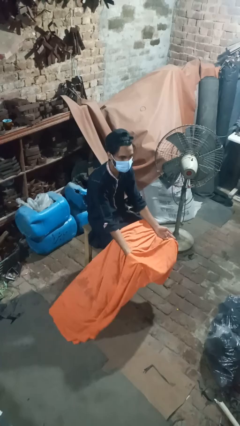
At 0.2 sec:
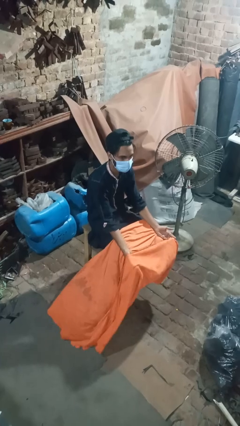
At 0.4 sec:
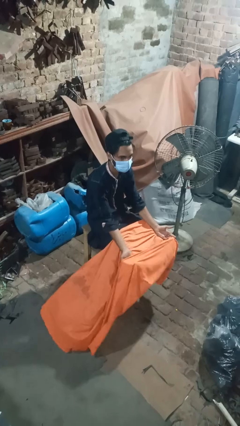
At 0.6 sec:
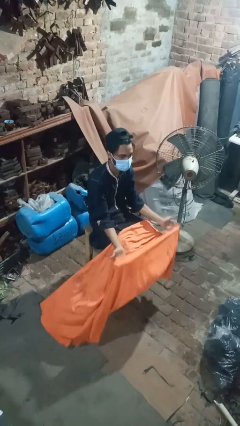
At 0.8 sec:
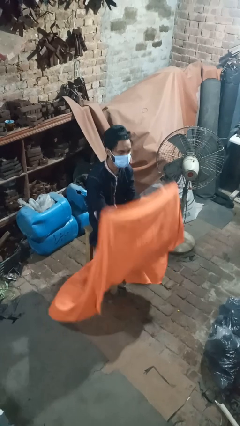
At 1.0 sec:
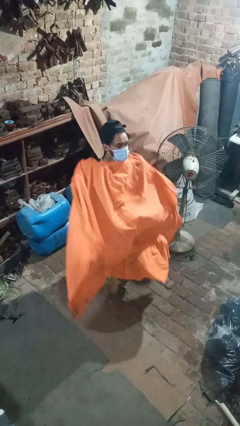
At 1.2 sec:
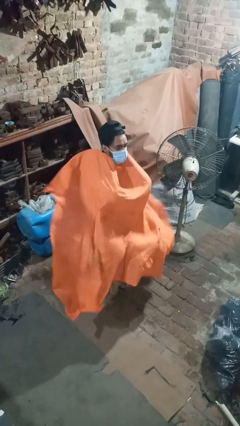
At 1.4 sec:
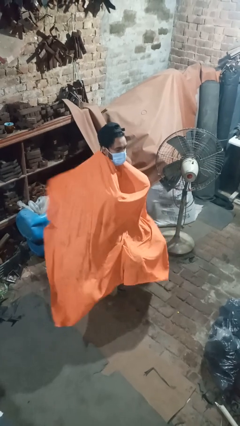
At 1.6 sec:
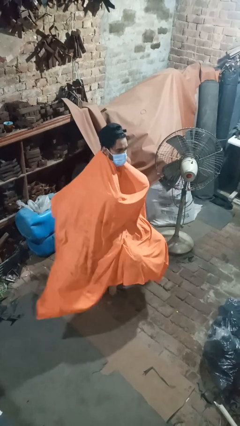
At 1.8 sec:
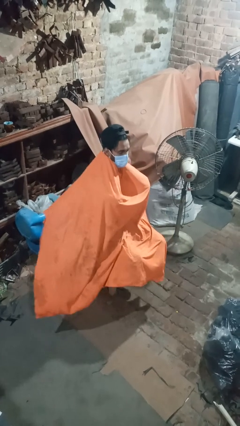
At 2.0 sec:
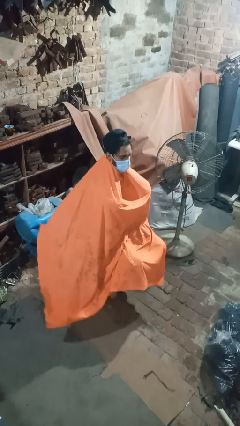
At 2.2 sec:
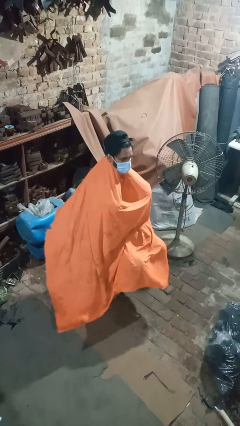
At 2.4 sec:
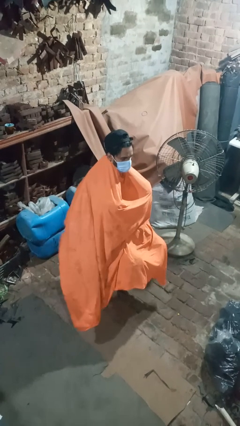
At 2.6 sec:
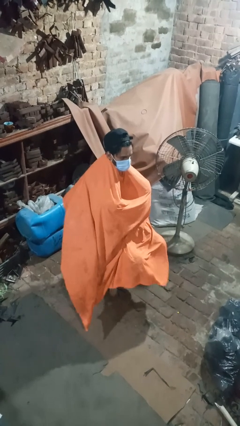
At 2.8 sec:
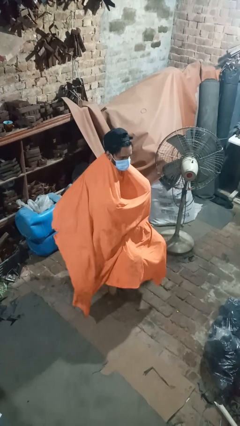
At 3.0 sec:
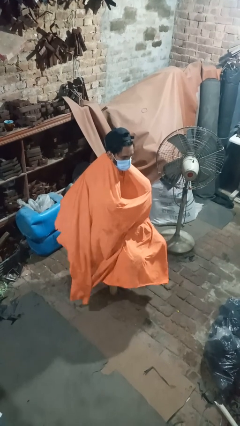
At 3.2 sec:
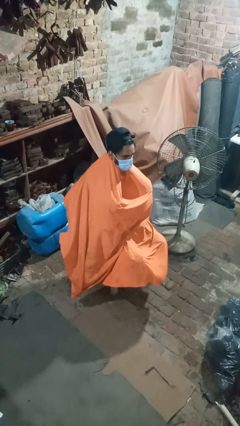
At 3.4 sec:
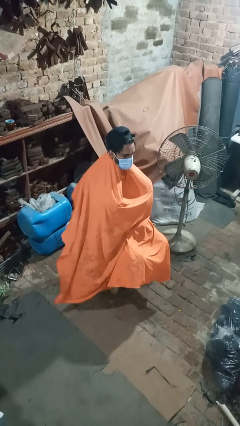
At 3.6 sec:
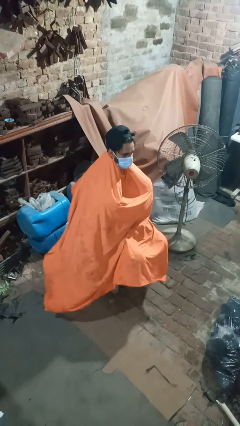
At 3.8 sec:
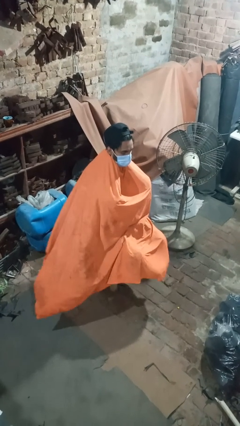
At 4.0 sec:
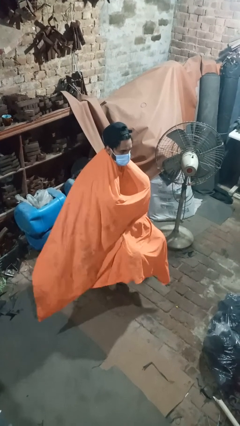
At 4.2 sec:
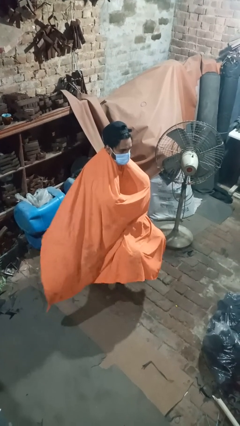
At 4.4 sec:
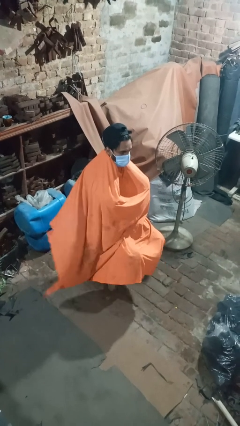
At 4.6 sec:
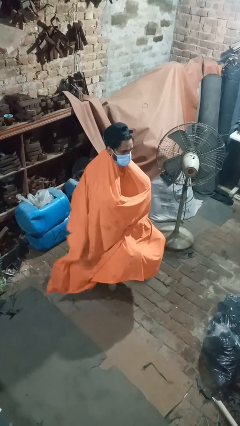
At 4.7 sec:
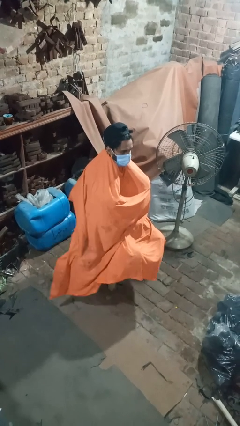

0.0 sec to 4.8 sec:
person covers with blanket

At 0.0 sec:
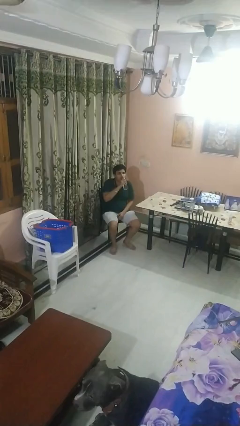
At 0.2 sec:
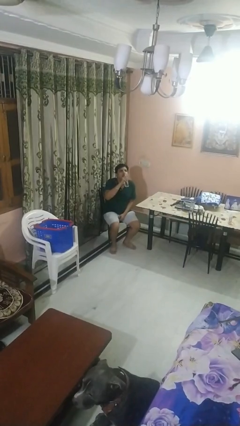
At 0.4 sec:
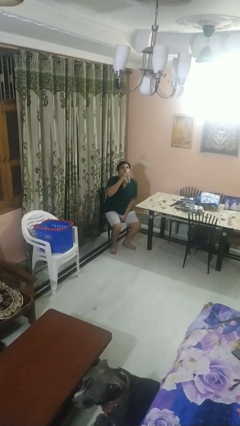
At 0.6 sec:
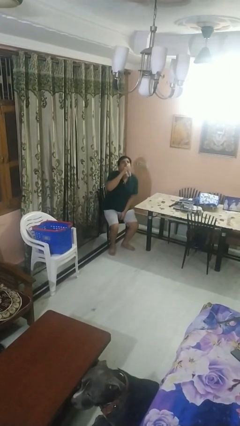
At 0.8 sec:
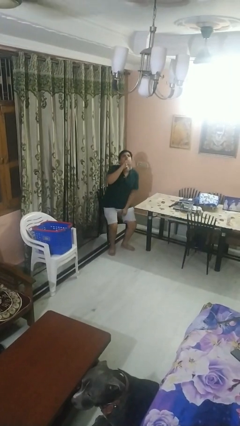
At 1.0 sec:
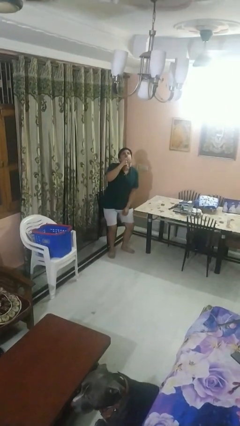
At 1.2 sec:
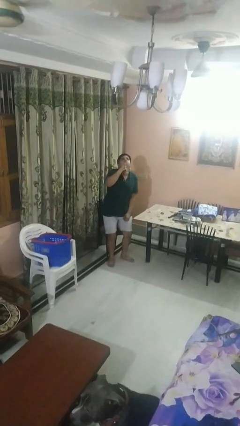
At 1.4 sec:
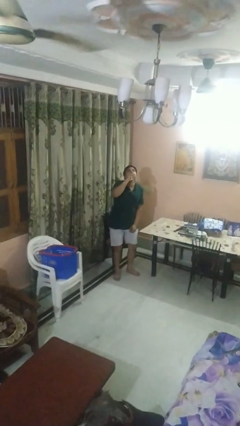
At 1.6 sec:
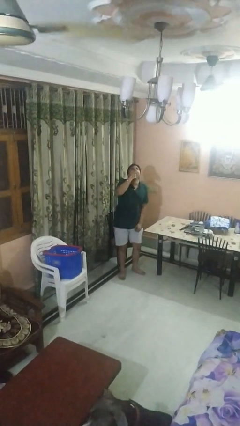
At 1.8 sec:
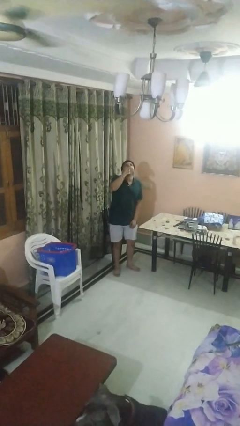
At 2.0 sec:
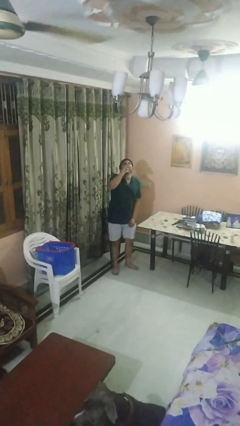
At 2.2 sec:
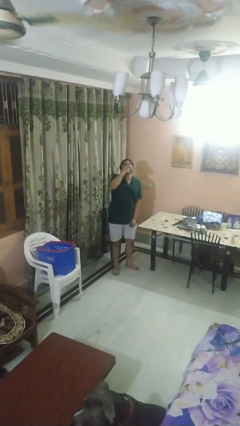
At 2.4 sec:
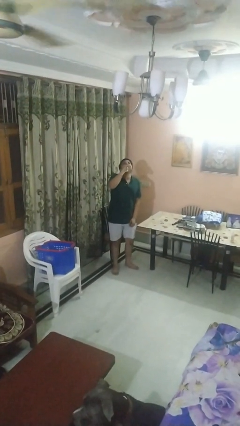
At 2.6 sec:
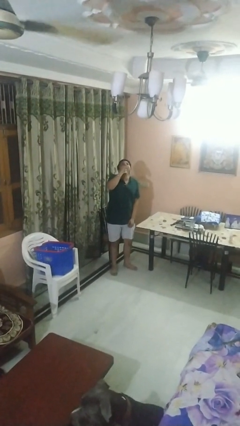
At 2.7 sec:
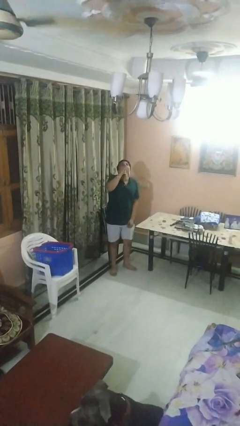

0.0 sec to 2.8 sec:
person drinks from bottle

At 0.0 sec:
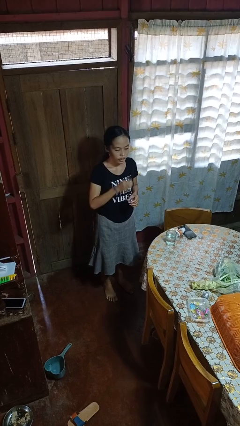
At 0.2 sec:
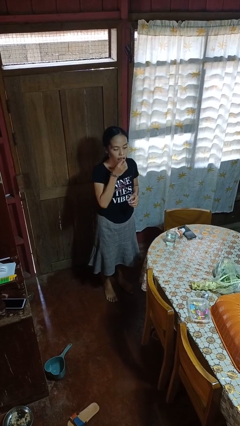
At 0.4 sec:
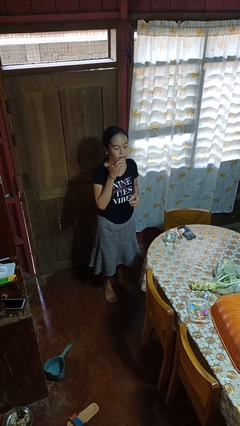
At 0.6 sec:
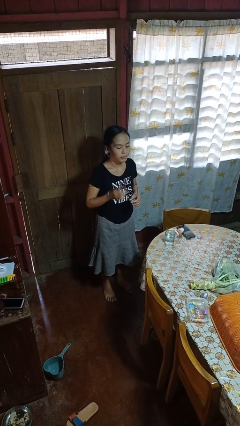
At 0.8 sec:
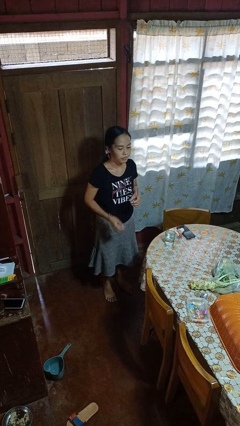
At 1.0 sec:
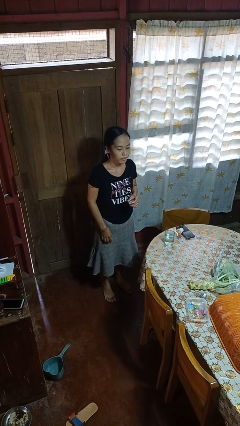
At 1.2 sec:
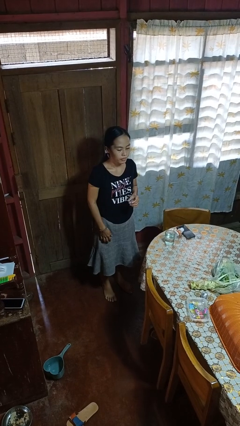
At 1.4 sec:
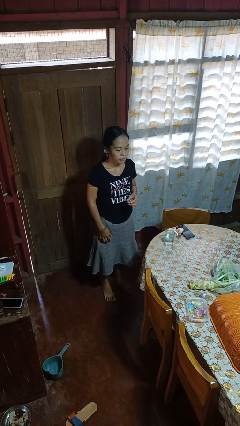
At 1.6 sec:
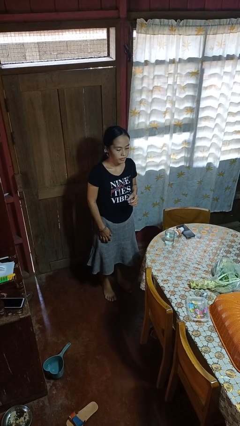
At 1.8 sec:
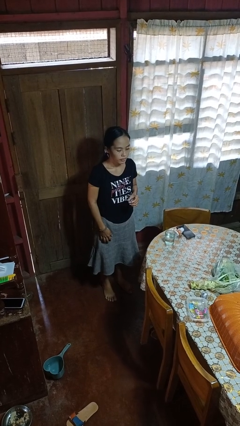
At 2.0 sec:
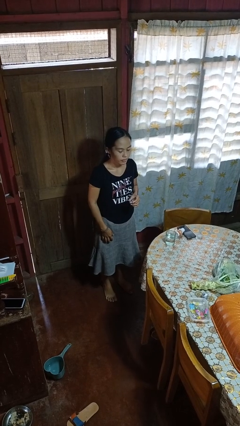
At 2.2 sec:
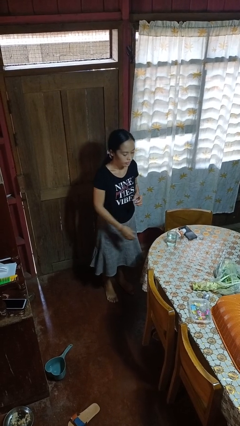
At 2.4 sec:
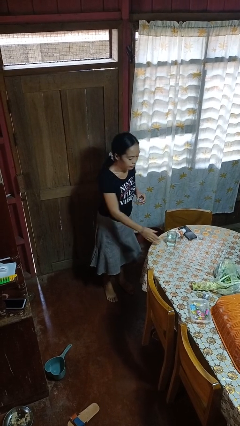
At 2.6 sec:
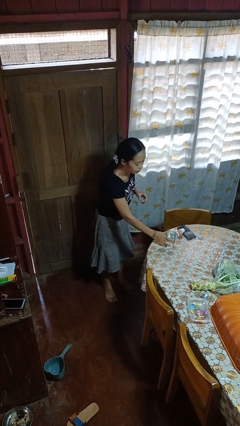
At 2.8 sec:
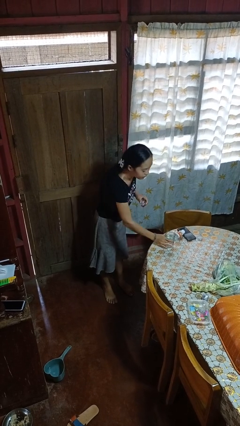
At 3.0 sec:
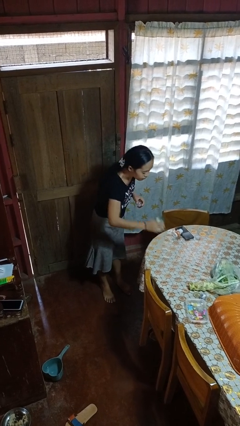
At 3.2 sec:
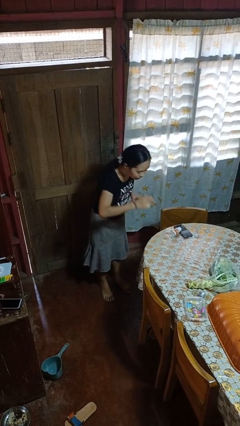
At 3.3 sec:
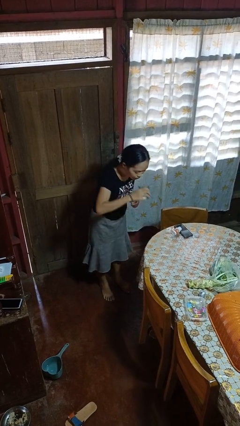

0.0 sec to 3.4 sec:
person takes medicine pills

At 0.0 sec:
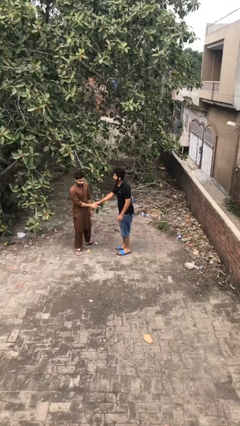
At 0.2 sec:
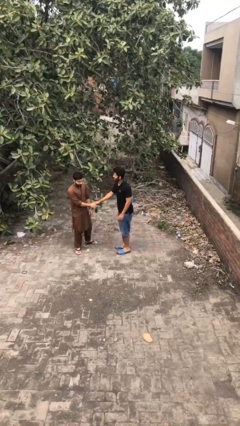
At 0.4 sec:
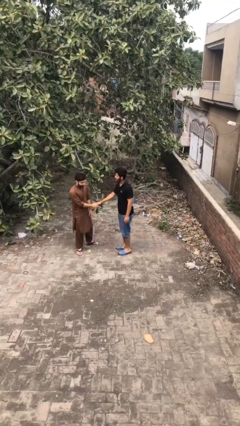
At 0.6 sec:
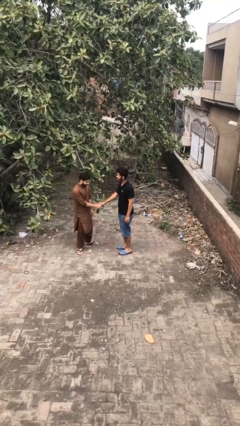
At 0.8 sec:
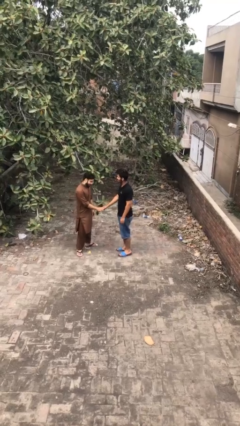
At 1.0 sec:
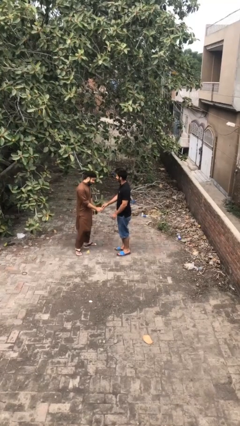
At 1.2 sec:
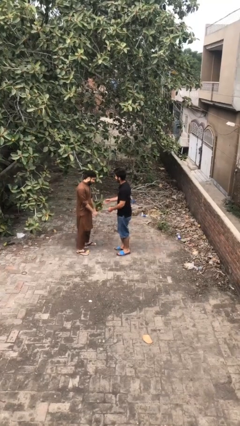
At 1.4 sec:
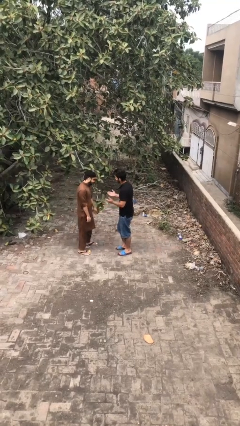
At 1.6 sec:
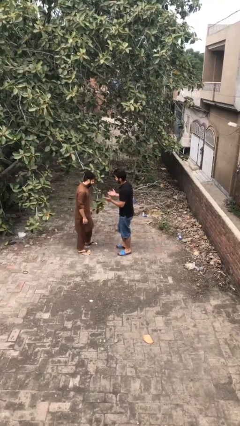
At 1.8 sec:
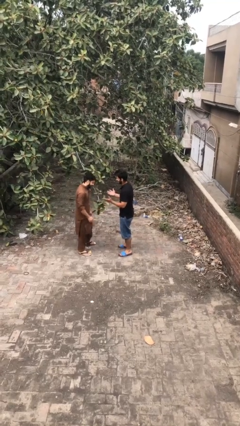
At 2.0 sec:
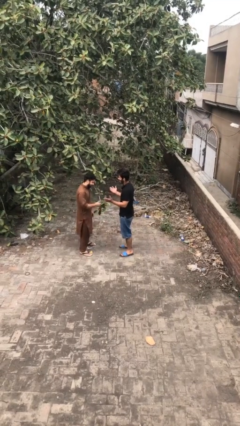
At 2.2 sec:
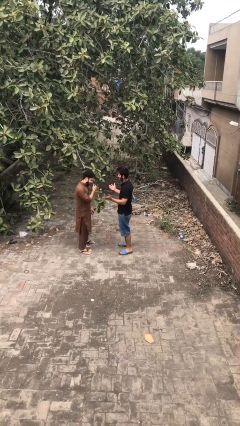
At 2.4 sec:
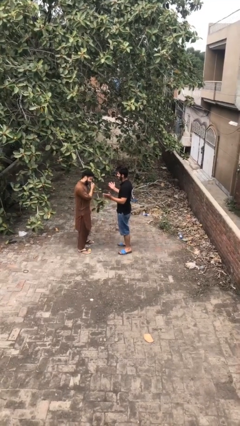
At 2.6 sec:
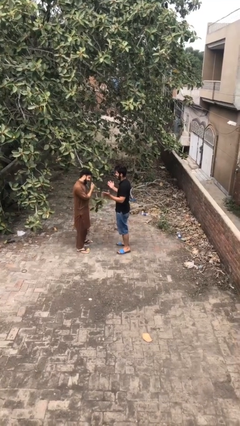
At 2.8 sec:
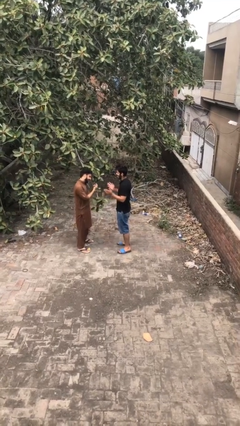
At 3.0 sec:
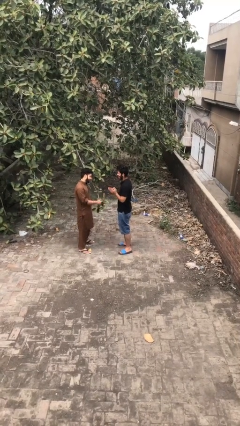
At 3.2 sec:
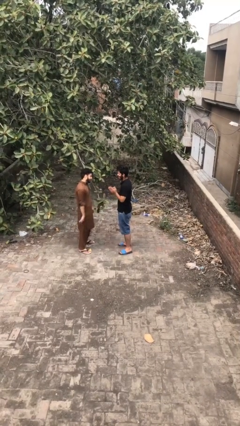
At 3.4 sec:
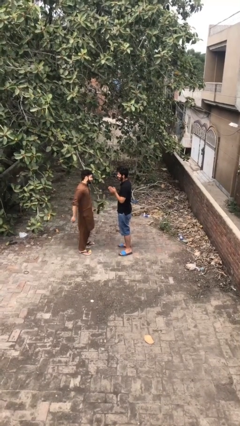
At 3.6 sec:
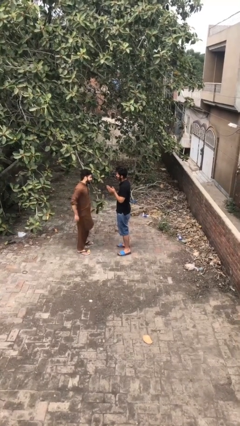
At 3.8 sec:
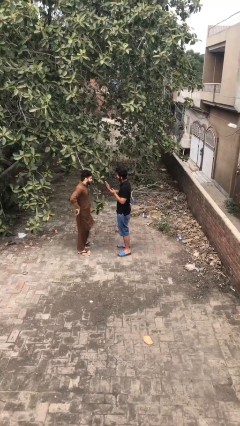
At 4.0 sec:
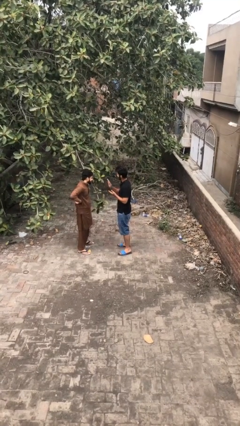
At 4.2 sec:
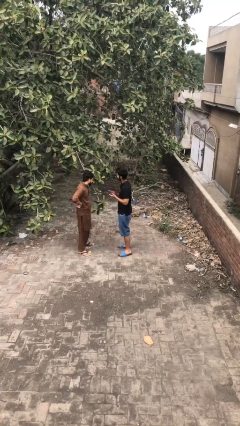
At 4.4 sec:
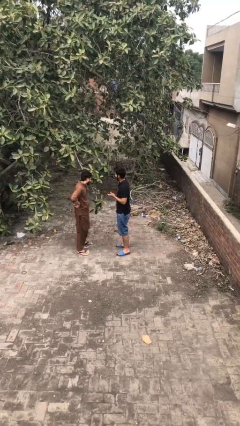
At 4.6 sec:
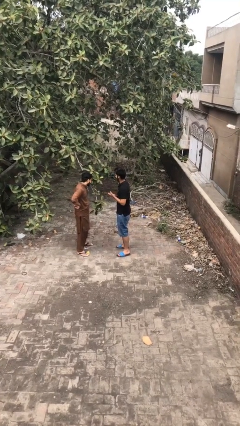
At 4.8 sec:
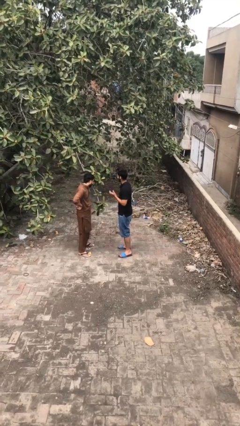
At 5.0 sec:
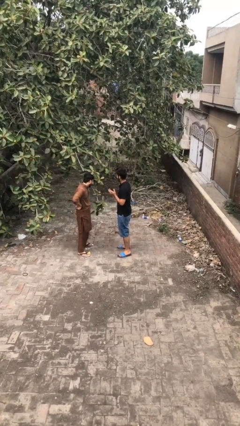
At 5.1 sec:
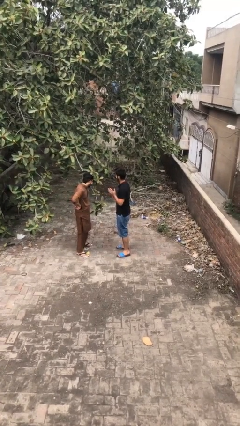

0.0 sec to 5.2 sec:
person talks to person

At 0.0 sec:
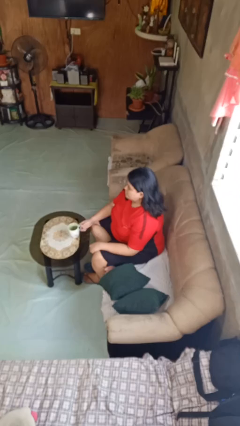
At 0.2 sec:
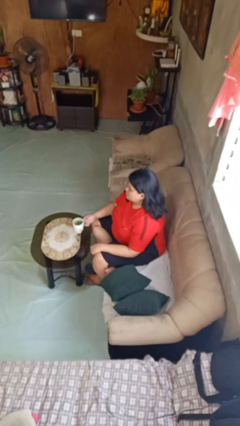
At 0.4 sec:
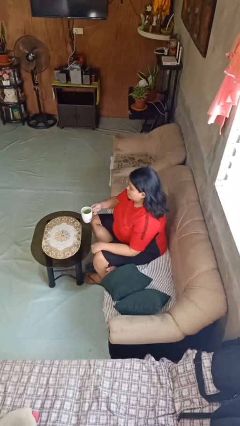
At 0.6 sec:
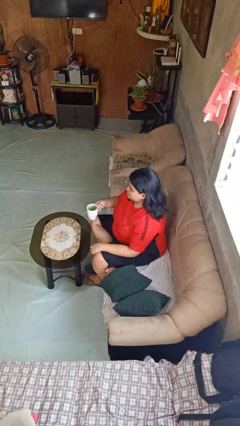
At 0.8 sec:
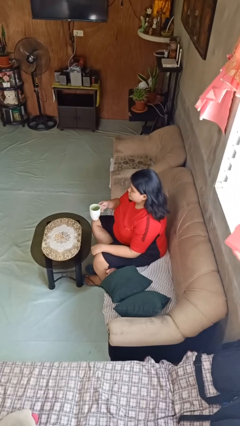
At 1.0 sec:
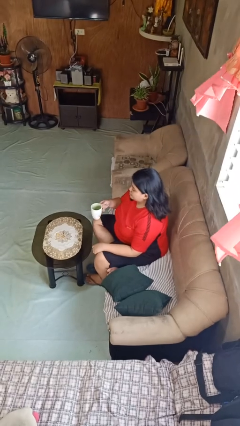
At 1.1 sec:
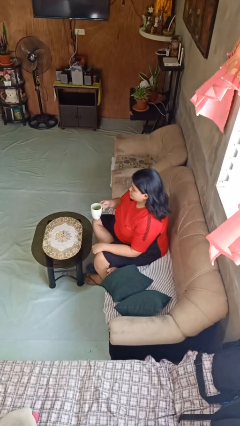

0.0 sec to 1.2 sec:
person picks up object from table
